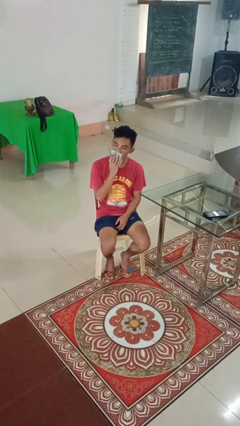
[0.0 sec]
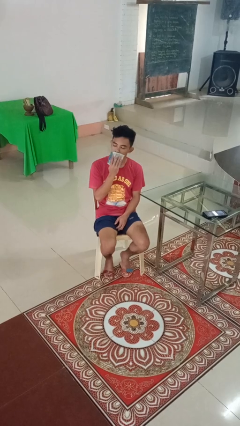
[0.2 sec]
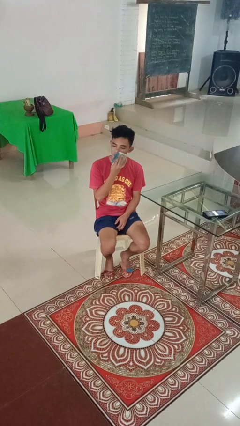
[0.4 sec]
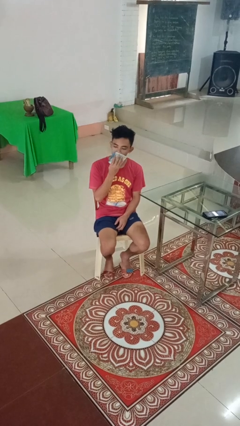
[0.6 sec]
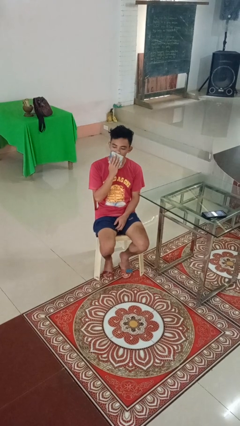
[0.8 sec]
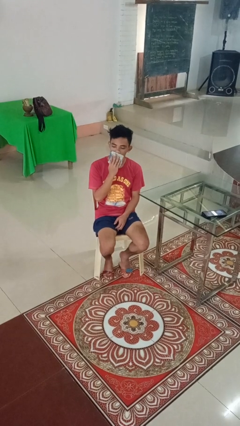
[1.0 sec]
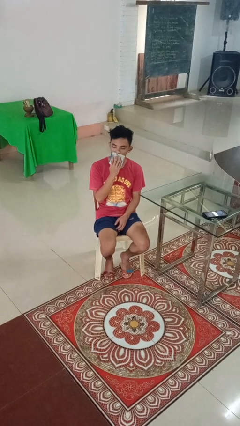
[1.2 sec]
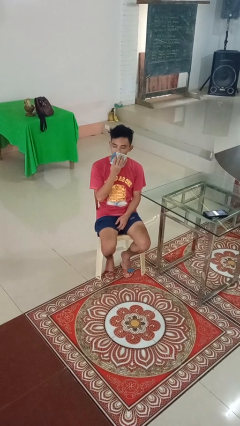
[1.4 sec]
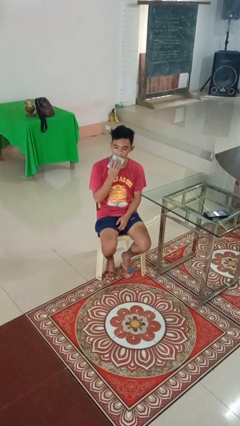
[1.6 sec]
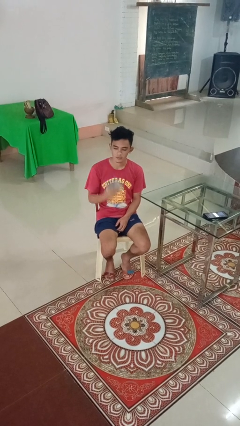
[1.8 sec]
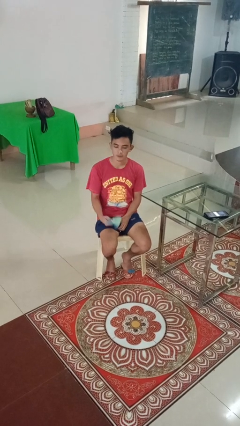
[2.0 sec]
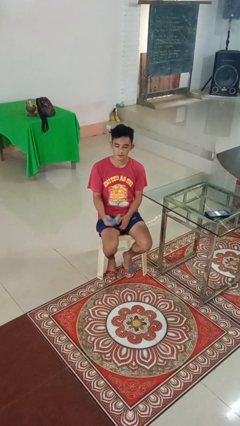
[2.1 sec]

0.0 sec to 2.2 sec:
person wipes mouth with napkin

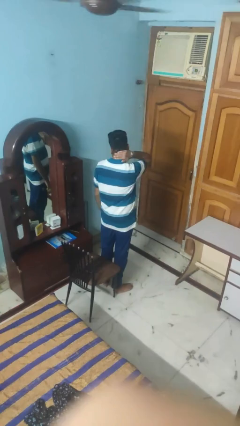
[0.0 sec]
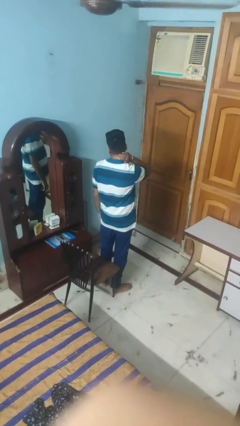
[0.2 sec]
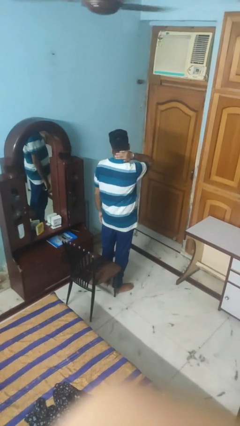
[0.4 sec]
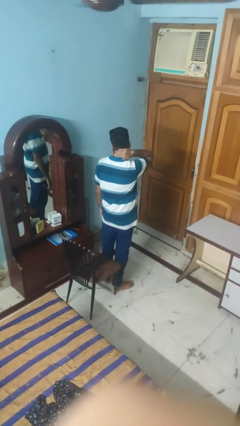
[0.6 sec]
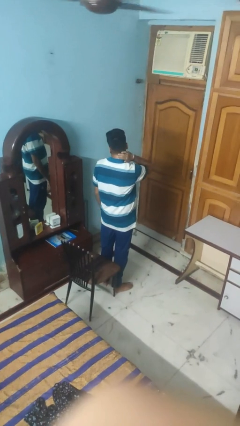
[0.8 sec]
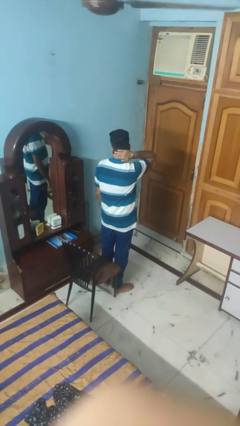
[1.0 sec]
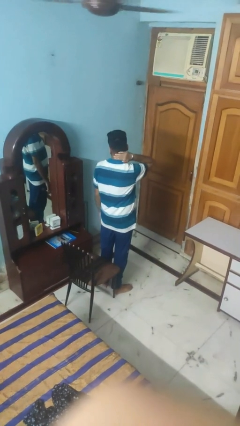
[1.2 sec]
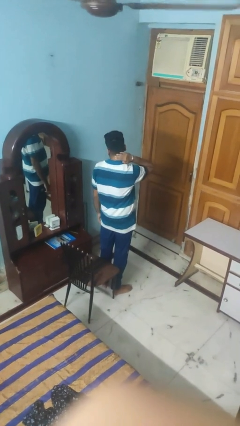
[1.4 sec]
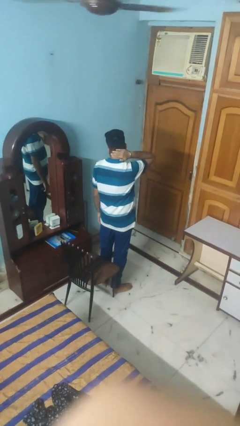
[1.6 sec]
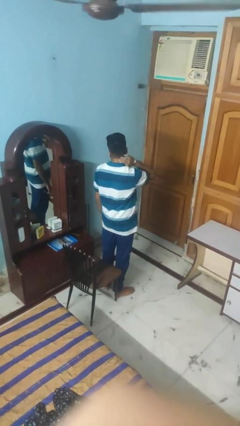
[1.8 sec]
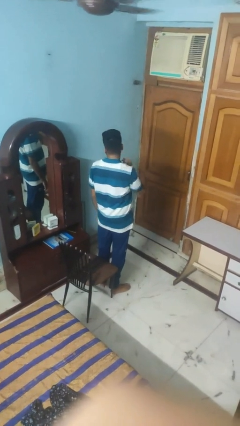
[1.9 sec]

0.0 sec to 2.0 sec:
person rubs neck

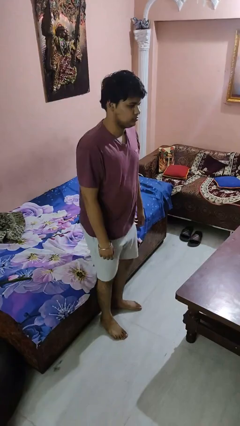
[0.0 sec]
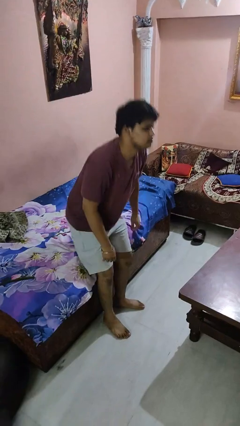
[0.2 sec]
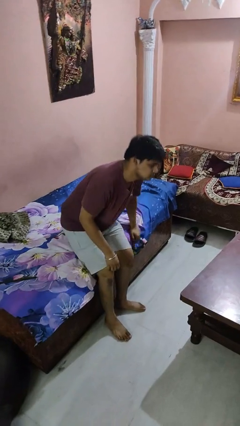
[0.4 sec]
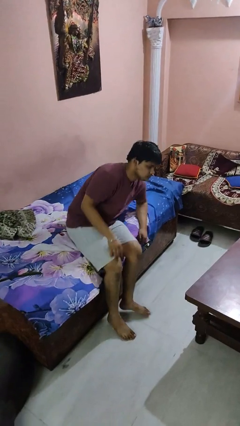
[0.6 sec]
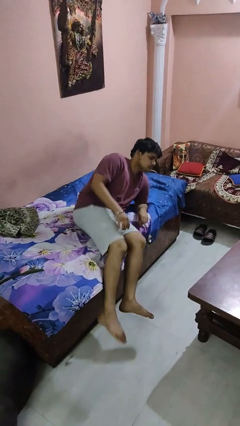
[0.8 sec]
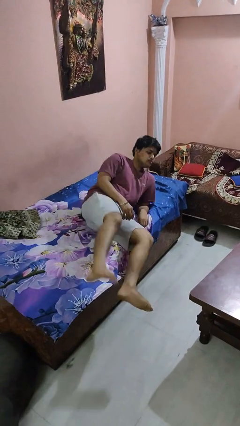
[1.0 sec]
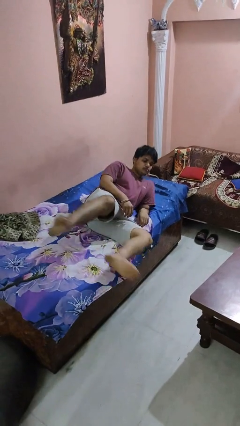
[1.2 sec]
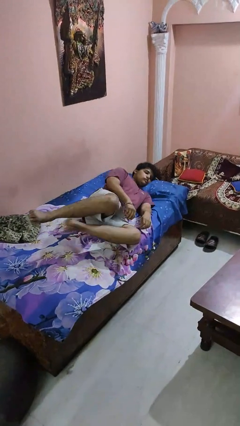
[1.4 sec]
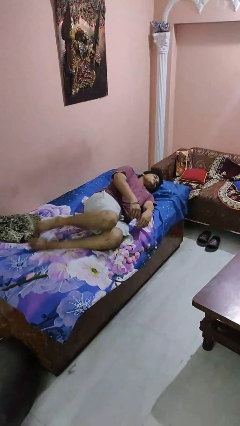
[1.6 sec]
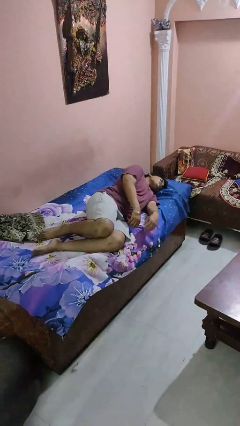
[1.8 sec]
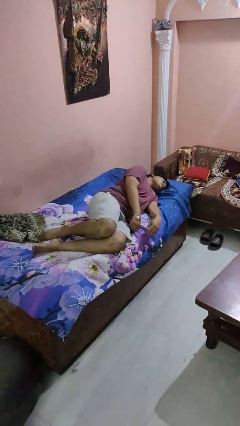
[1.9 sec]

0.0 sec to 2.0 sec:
person lies down on bed

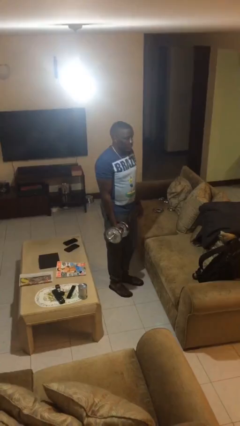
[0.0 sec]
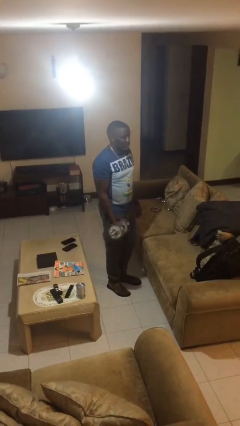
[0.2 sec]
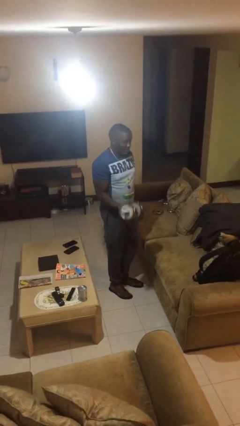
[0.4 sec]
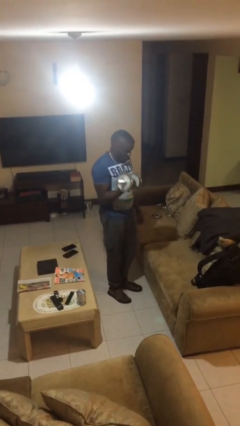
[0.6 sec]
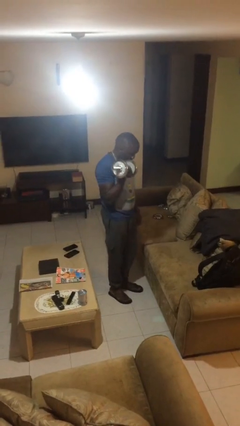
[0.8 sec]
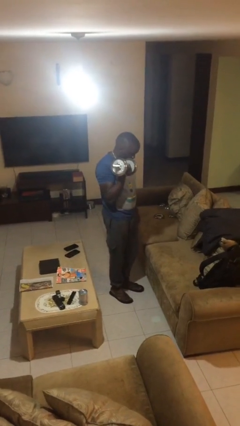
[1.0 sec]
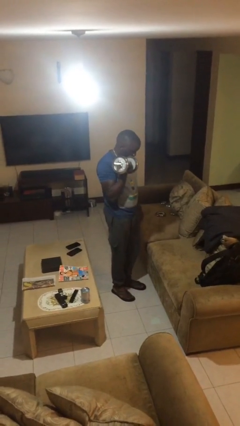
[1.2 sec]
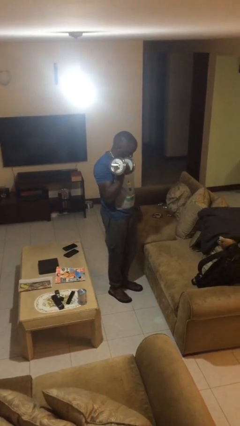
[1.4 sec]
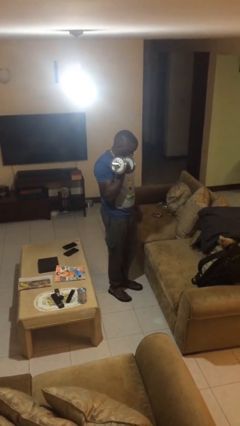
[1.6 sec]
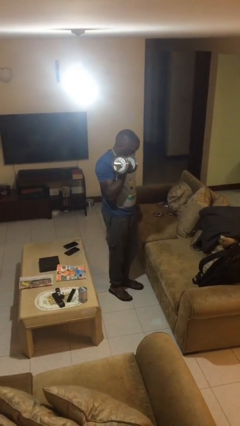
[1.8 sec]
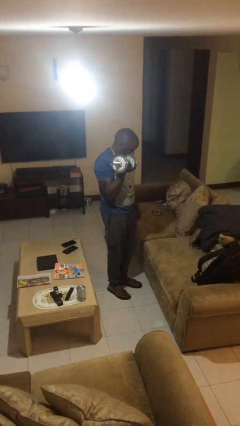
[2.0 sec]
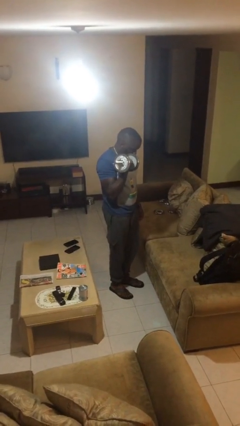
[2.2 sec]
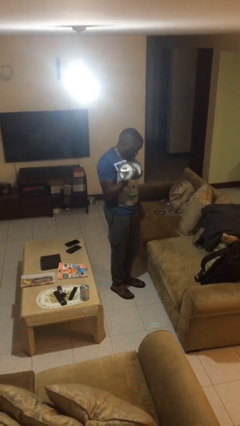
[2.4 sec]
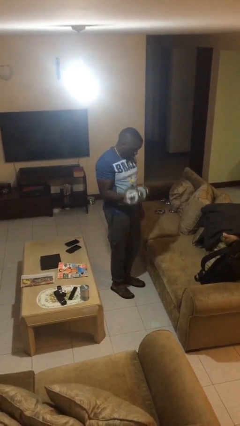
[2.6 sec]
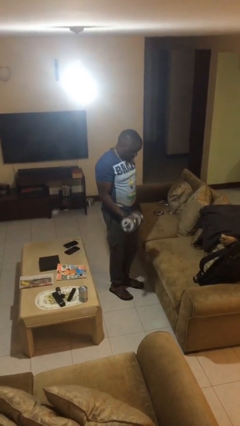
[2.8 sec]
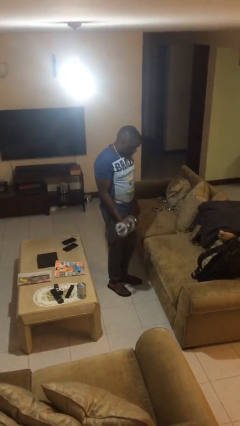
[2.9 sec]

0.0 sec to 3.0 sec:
person lifts dumbbells

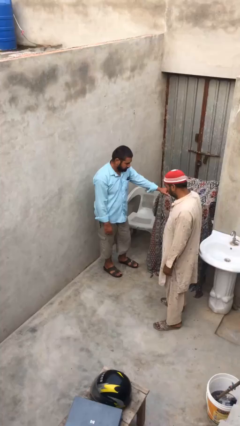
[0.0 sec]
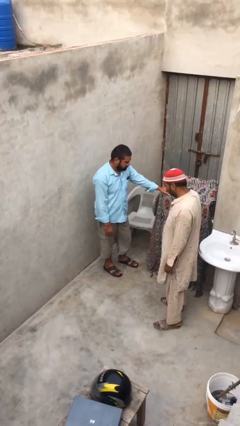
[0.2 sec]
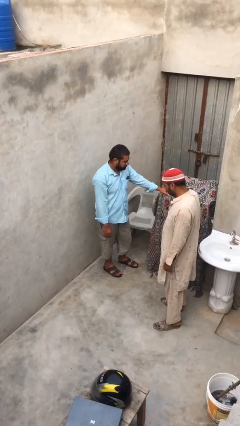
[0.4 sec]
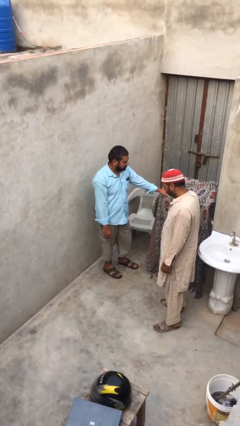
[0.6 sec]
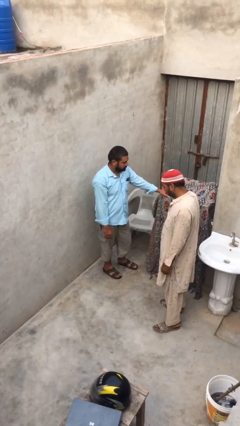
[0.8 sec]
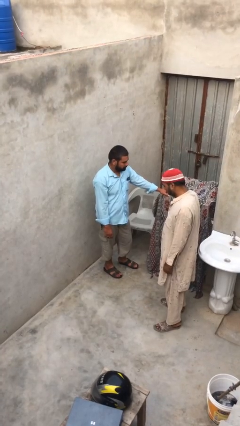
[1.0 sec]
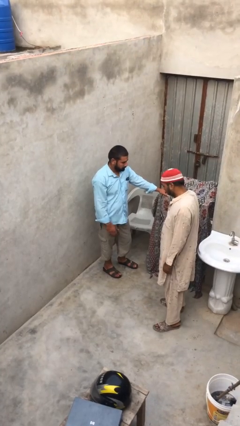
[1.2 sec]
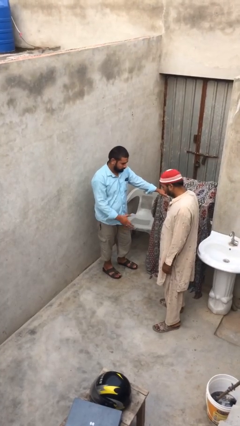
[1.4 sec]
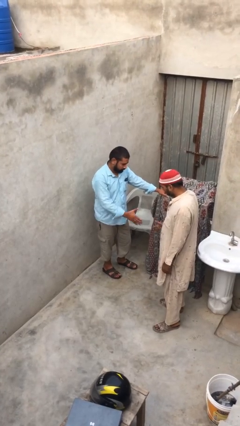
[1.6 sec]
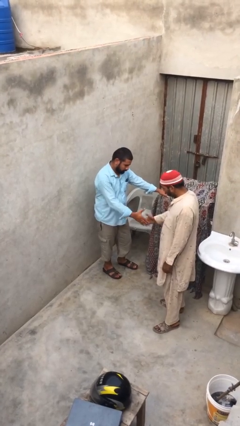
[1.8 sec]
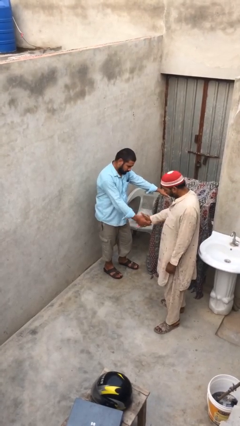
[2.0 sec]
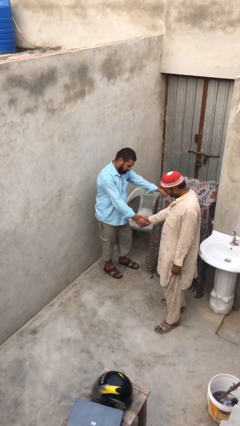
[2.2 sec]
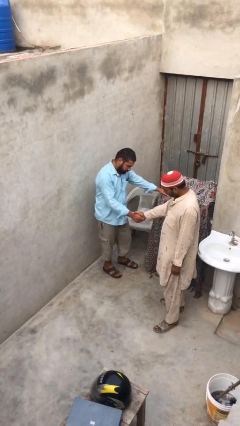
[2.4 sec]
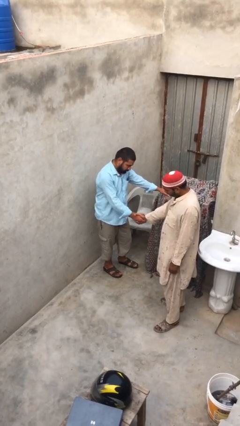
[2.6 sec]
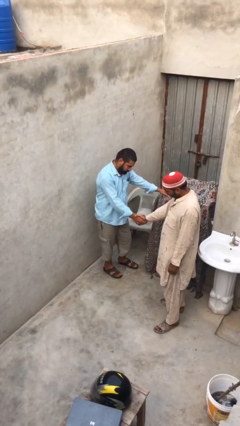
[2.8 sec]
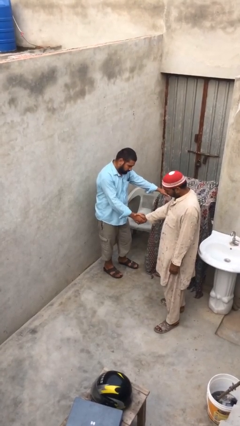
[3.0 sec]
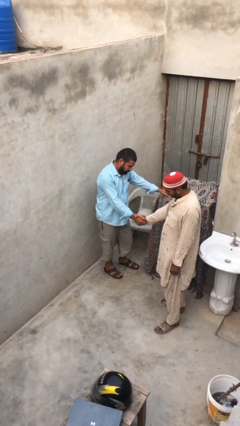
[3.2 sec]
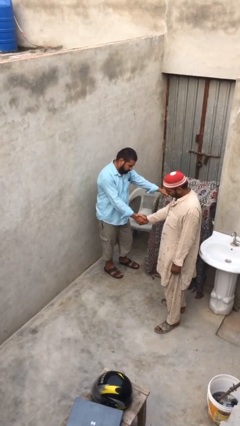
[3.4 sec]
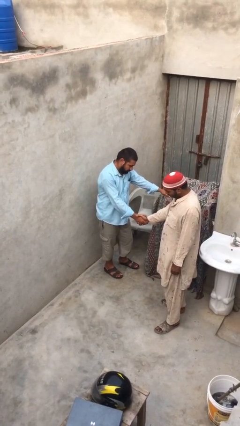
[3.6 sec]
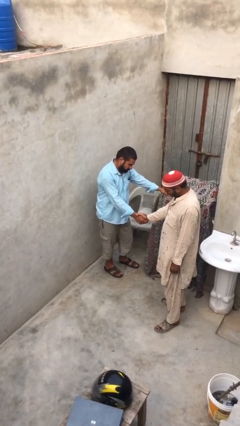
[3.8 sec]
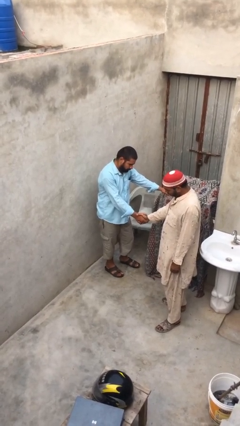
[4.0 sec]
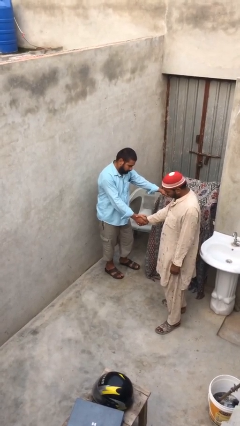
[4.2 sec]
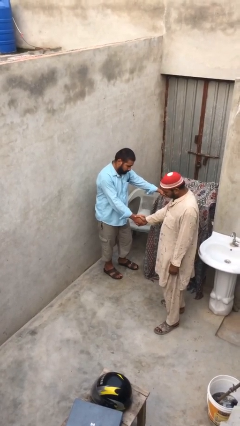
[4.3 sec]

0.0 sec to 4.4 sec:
person shakes hand

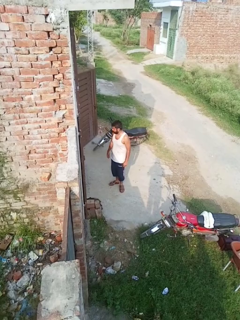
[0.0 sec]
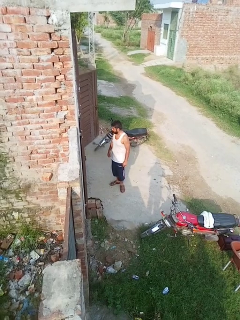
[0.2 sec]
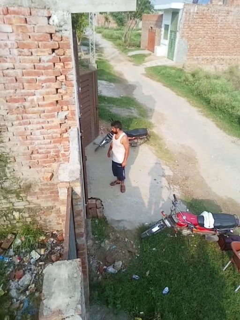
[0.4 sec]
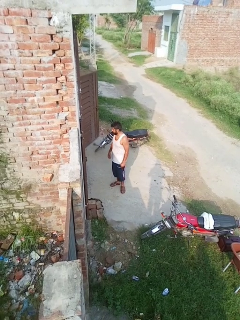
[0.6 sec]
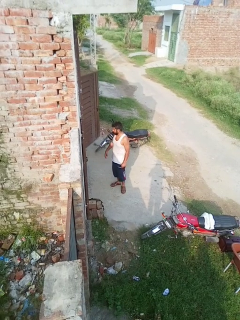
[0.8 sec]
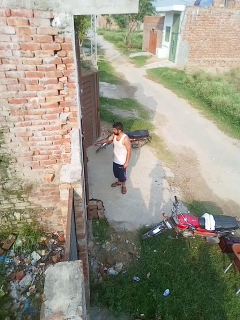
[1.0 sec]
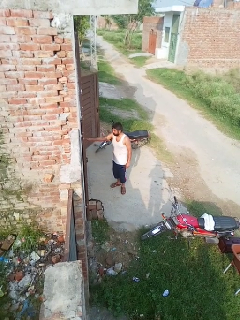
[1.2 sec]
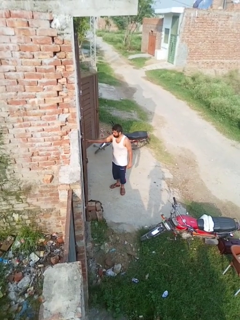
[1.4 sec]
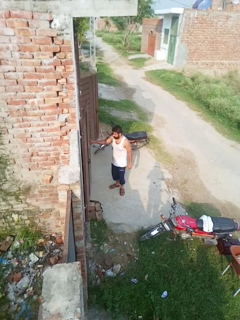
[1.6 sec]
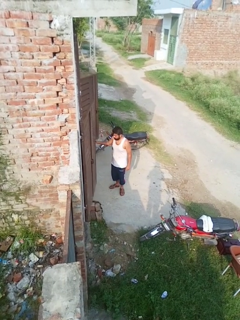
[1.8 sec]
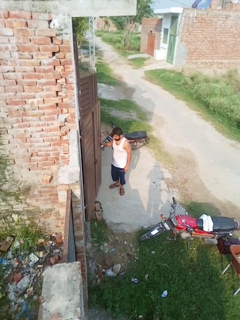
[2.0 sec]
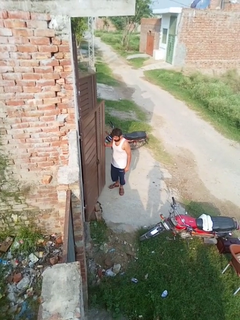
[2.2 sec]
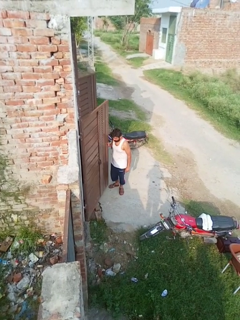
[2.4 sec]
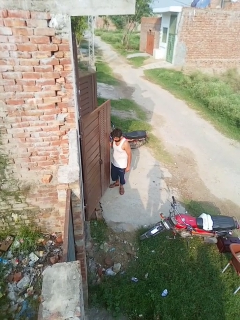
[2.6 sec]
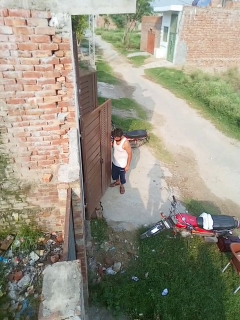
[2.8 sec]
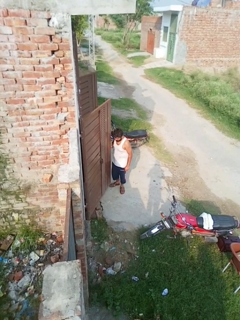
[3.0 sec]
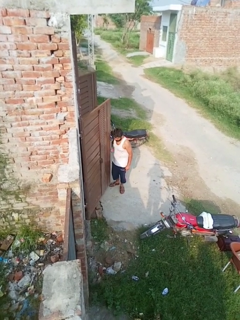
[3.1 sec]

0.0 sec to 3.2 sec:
person opens facility door

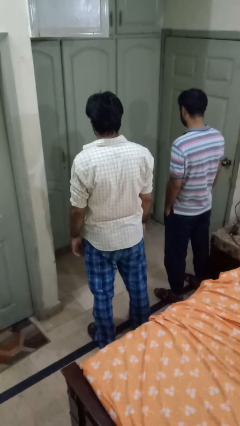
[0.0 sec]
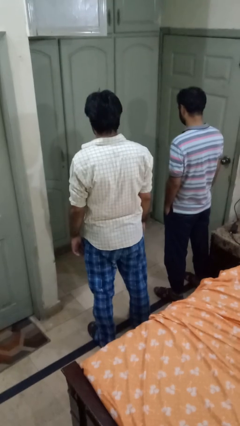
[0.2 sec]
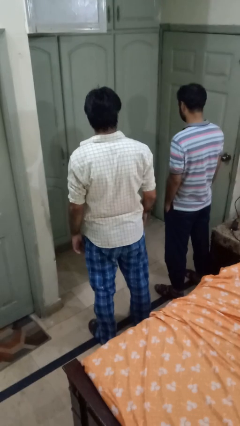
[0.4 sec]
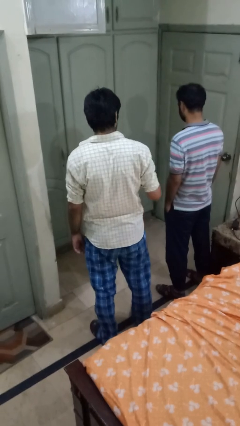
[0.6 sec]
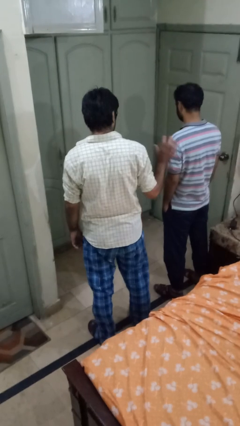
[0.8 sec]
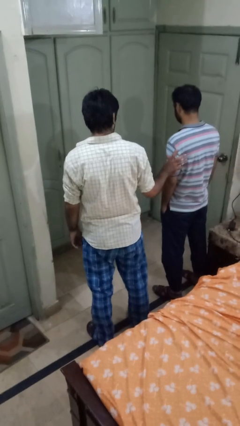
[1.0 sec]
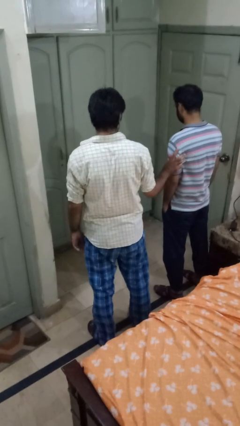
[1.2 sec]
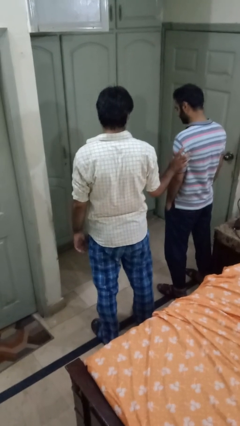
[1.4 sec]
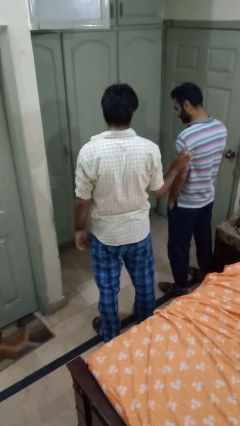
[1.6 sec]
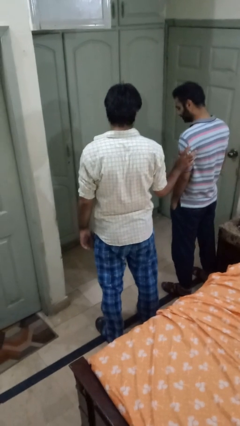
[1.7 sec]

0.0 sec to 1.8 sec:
person grabs person by bicep
